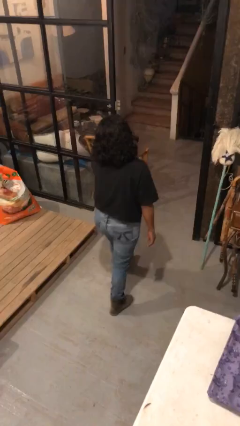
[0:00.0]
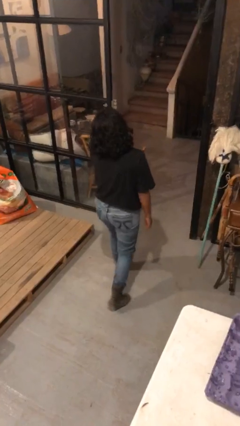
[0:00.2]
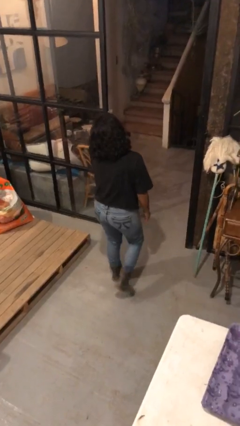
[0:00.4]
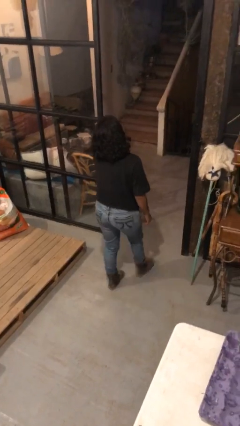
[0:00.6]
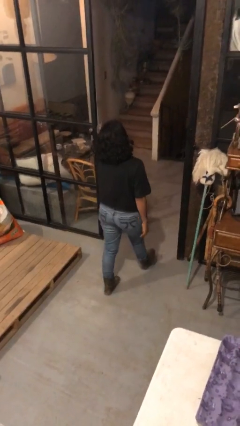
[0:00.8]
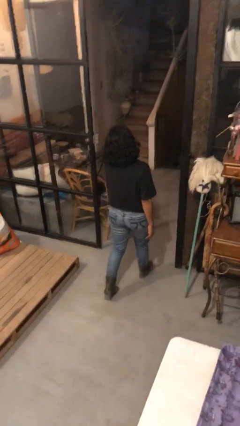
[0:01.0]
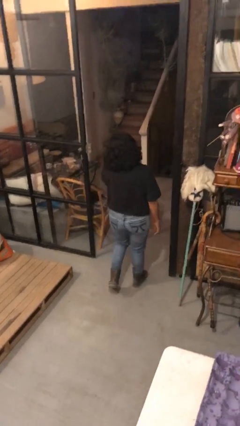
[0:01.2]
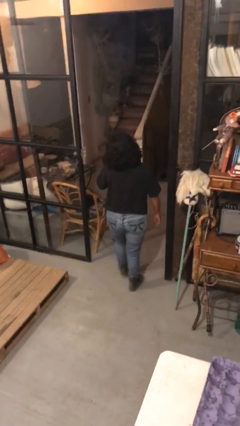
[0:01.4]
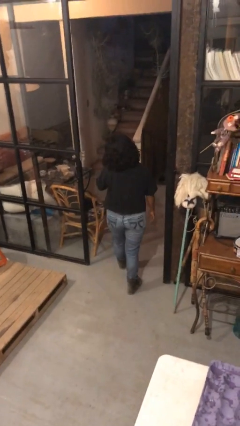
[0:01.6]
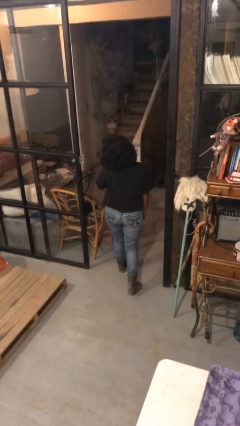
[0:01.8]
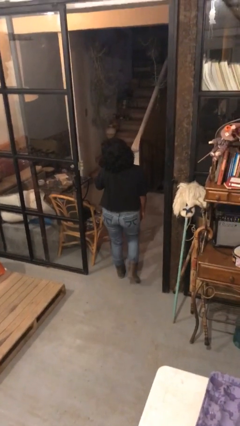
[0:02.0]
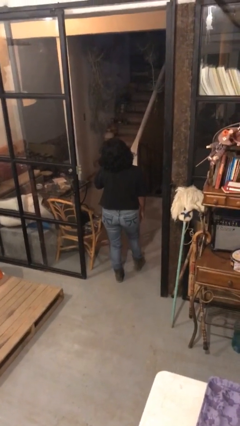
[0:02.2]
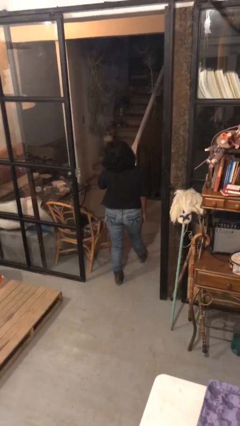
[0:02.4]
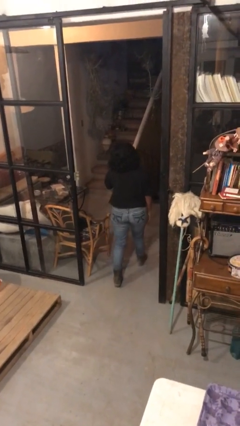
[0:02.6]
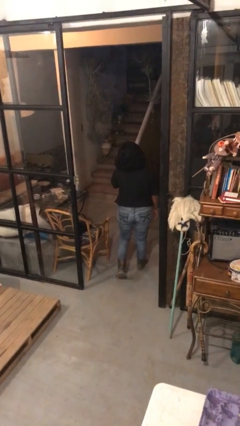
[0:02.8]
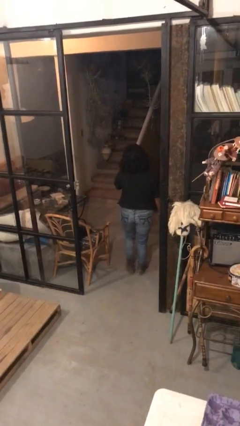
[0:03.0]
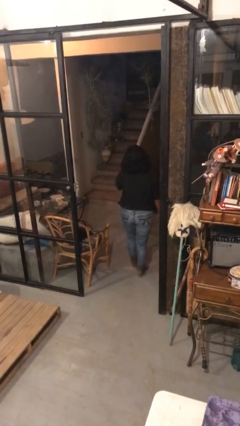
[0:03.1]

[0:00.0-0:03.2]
person exits scene through structure

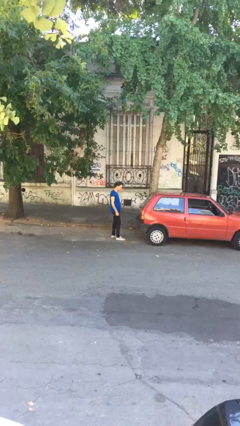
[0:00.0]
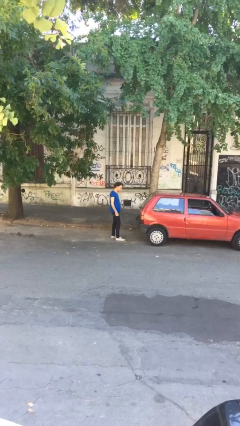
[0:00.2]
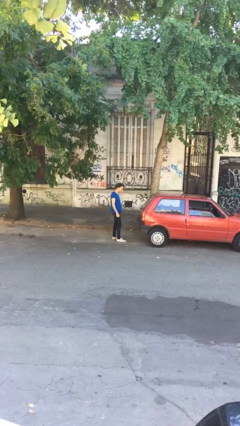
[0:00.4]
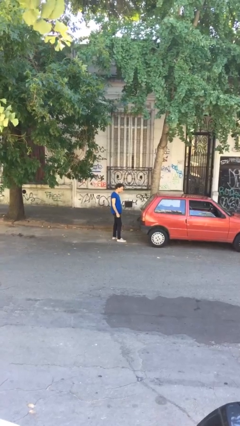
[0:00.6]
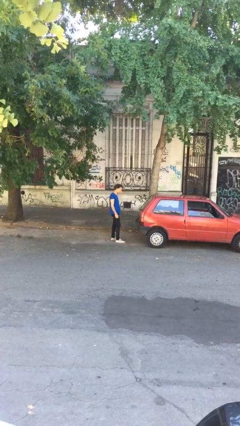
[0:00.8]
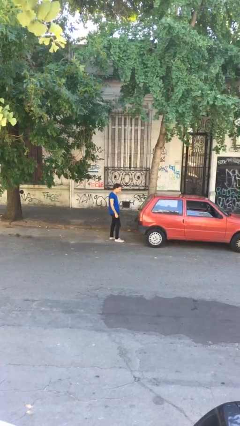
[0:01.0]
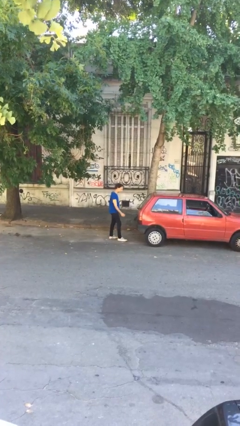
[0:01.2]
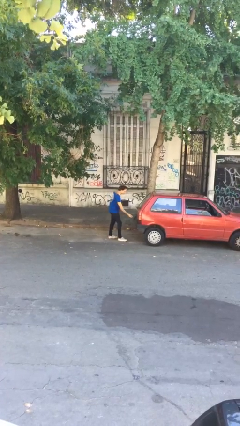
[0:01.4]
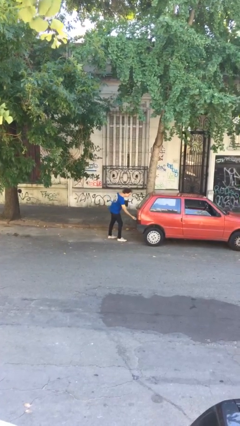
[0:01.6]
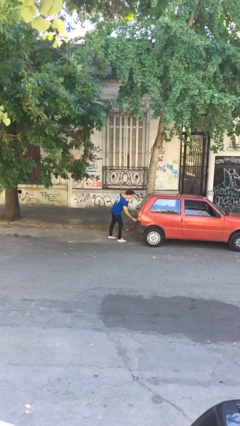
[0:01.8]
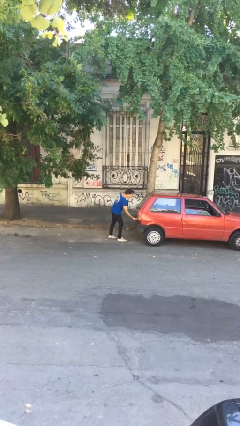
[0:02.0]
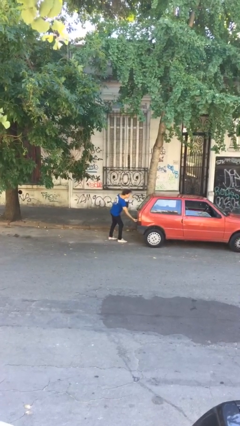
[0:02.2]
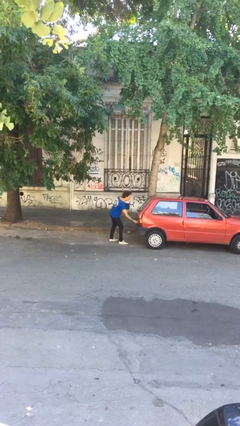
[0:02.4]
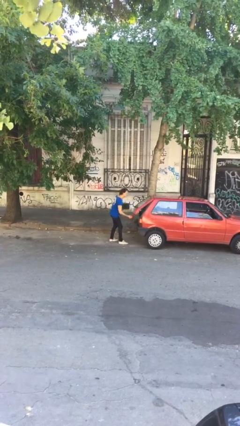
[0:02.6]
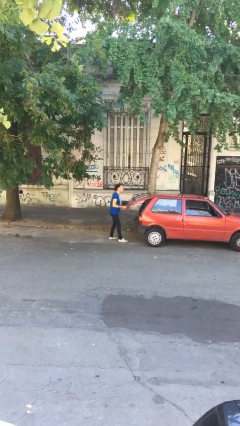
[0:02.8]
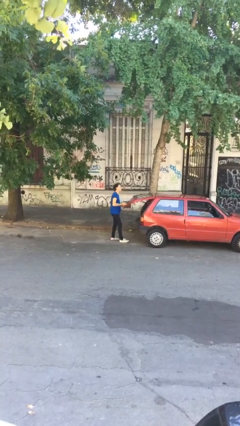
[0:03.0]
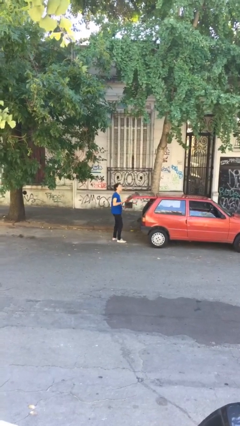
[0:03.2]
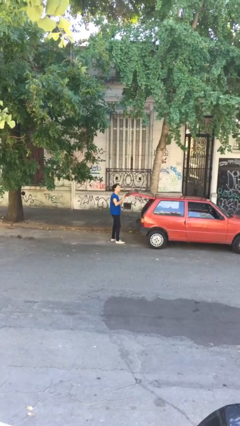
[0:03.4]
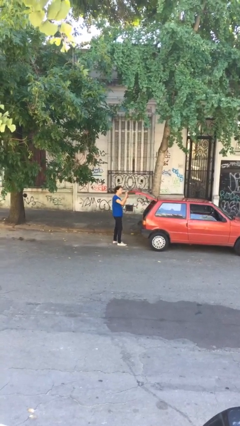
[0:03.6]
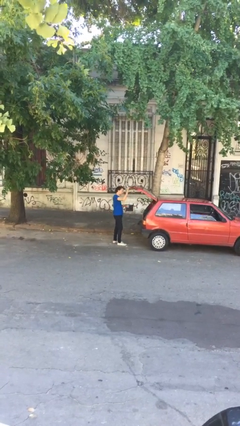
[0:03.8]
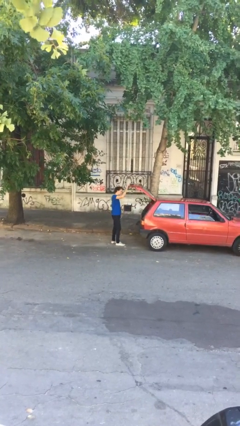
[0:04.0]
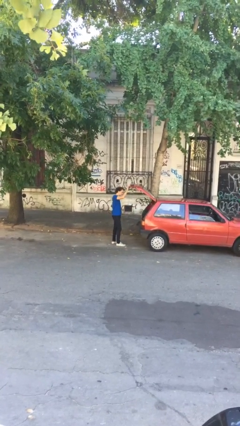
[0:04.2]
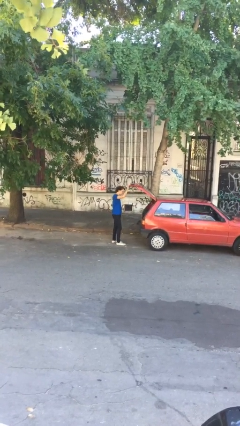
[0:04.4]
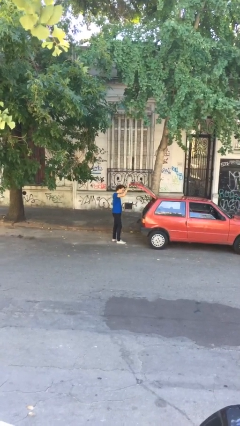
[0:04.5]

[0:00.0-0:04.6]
person opens car trunk

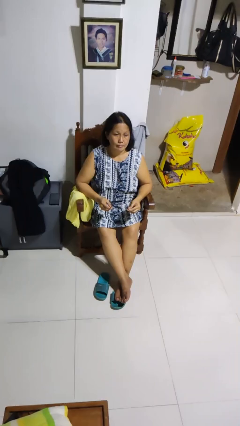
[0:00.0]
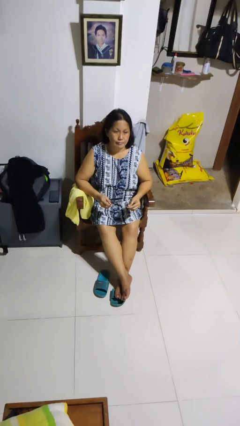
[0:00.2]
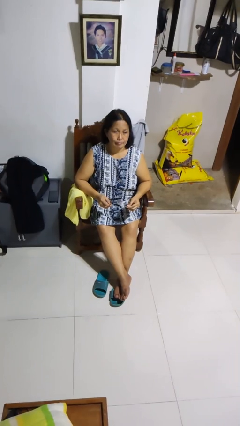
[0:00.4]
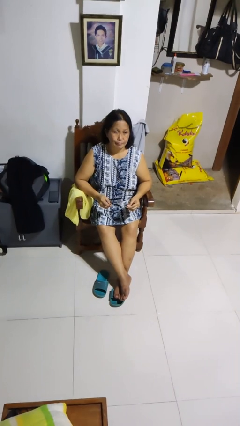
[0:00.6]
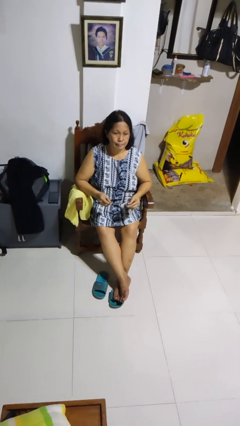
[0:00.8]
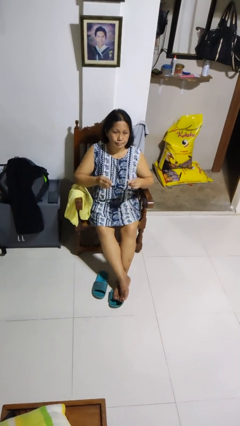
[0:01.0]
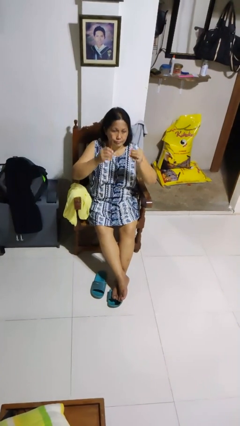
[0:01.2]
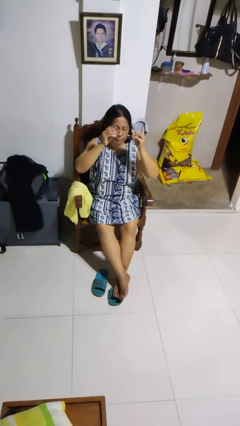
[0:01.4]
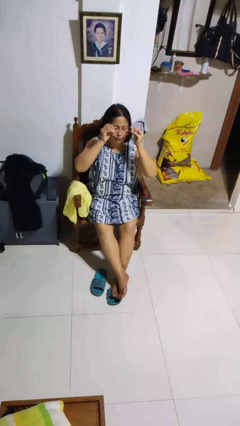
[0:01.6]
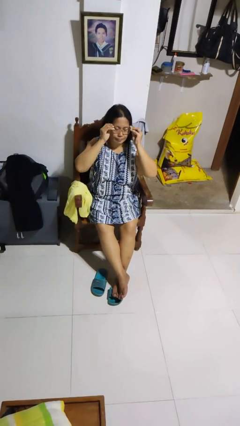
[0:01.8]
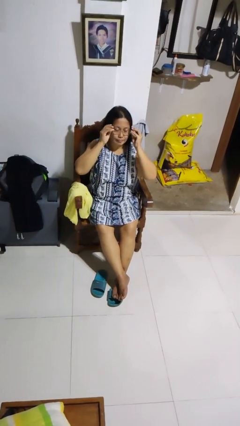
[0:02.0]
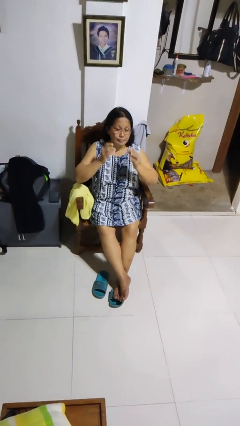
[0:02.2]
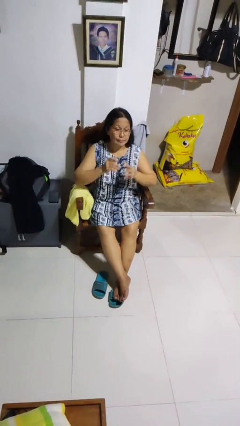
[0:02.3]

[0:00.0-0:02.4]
person puts on glasses

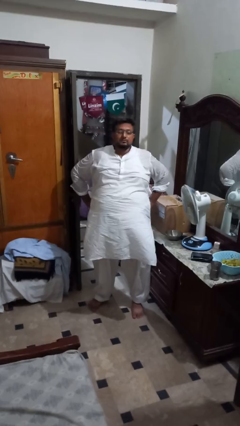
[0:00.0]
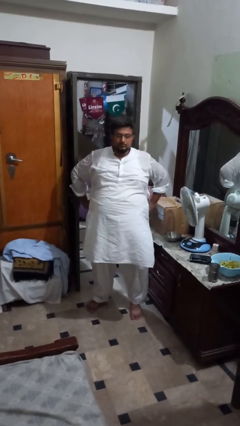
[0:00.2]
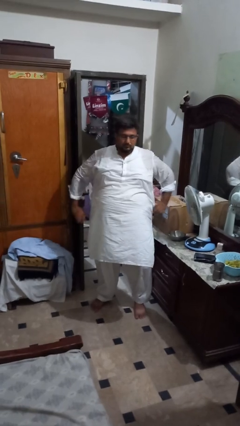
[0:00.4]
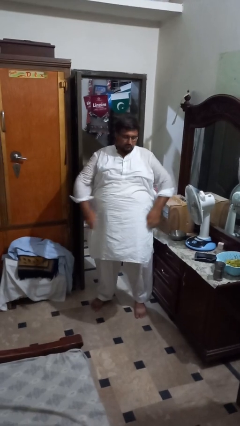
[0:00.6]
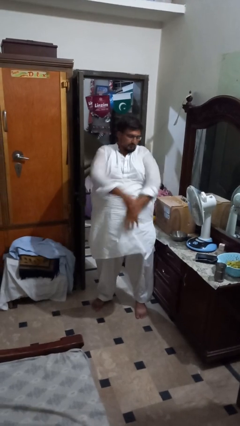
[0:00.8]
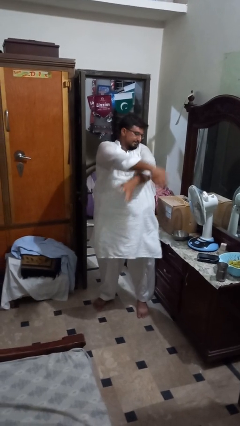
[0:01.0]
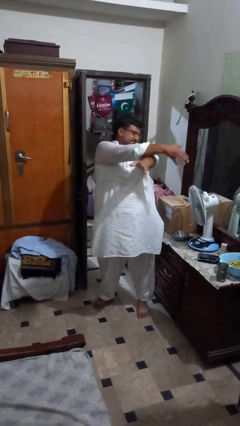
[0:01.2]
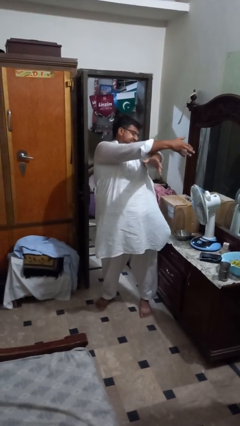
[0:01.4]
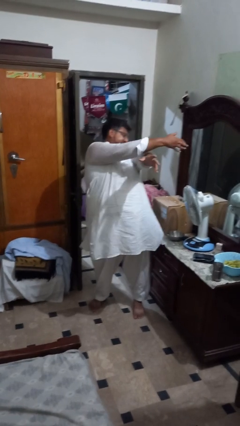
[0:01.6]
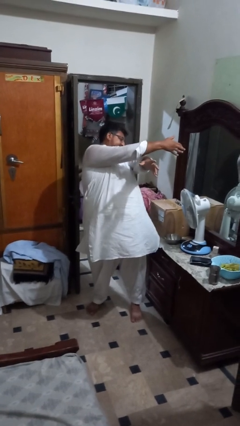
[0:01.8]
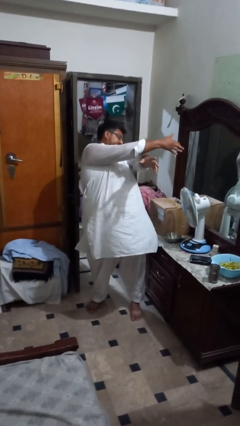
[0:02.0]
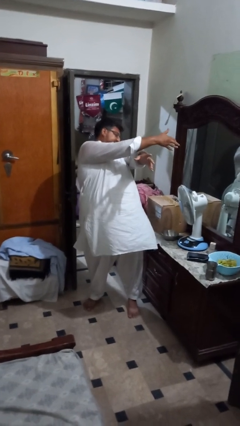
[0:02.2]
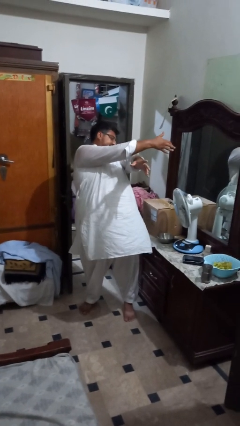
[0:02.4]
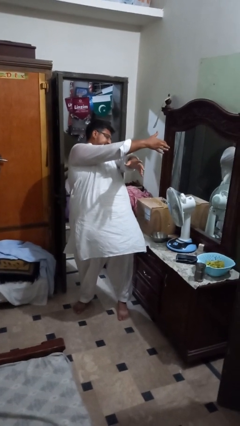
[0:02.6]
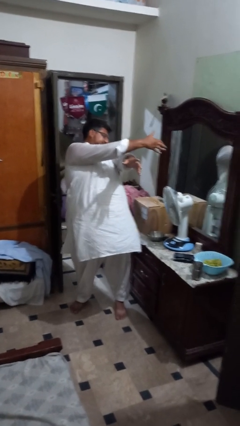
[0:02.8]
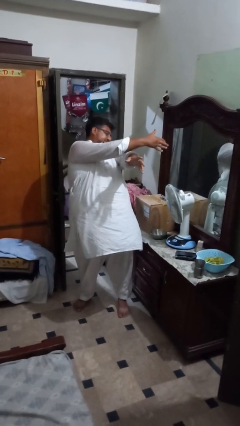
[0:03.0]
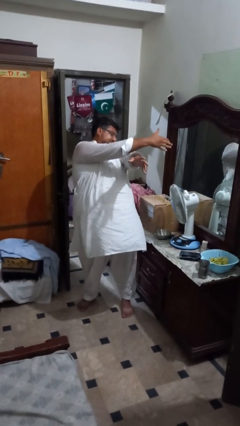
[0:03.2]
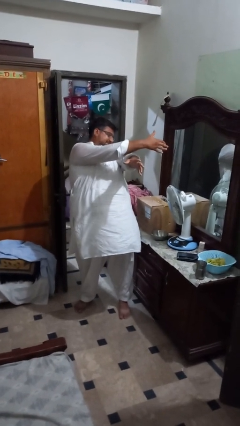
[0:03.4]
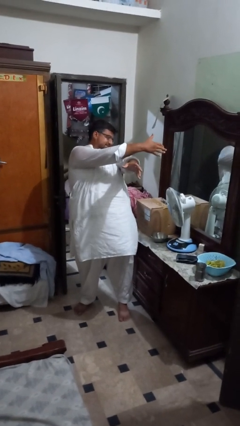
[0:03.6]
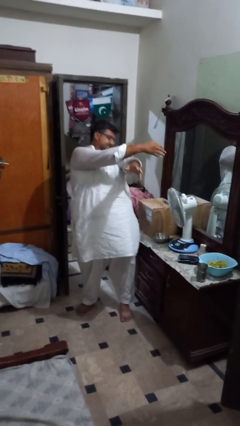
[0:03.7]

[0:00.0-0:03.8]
person stretches arms to side

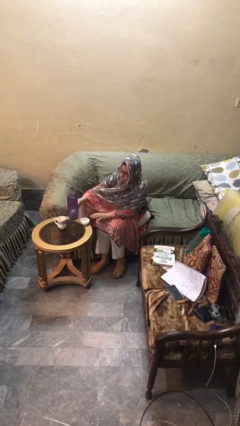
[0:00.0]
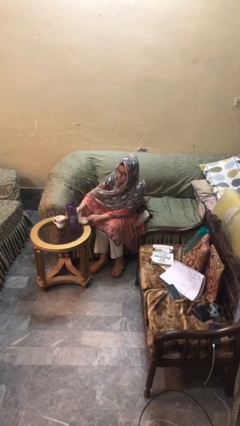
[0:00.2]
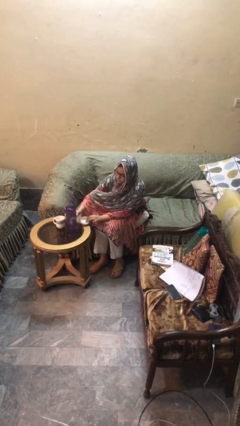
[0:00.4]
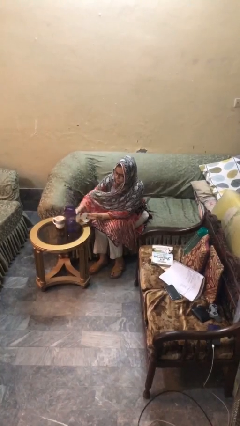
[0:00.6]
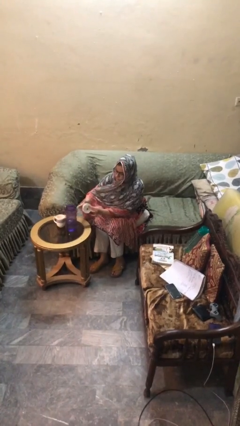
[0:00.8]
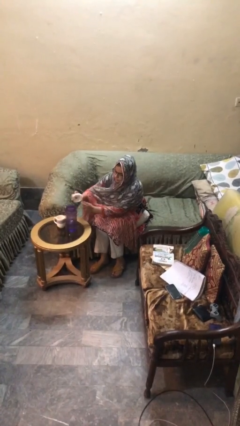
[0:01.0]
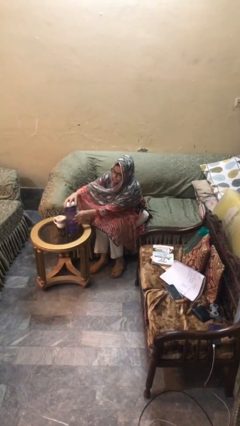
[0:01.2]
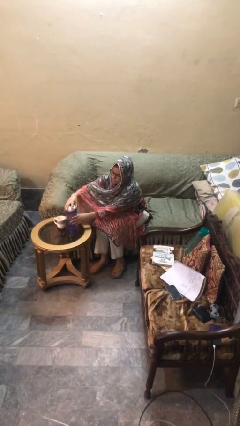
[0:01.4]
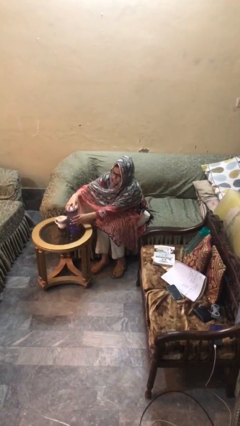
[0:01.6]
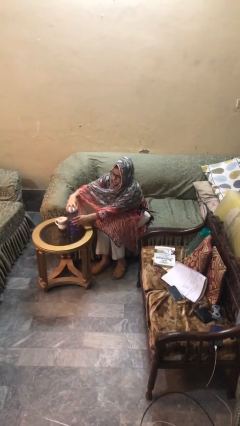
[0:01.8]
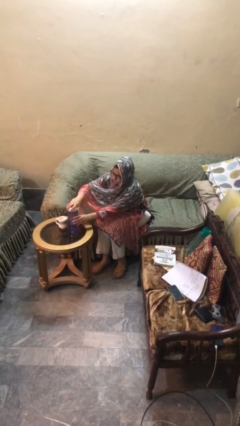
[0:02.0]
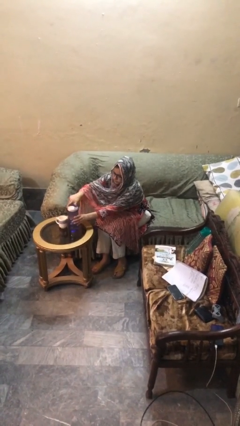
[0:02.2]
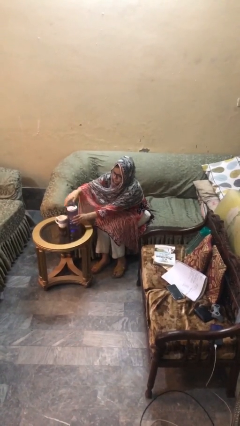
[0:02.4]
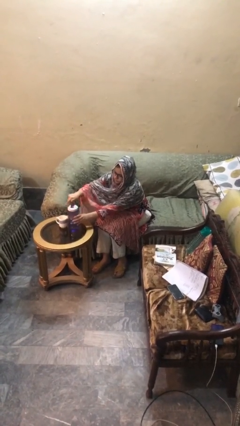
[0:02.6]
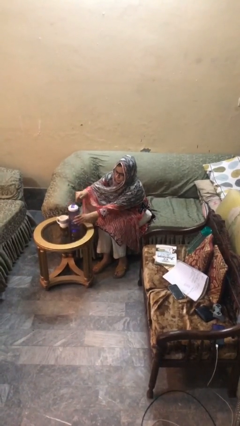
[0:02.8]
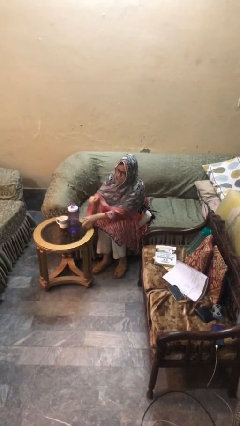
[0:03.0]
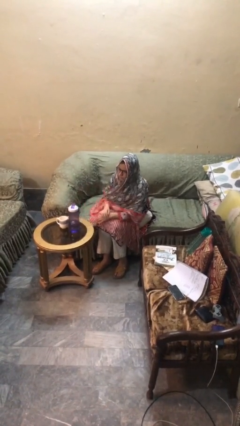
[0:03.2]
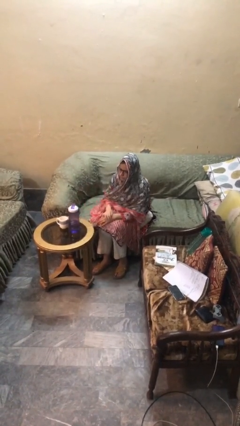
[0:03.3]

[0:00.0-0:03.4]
person screws lid to bottle

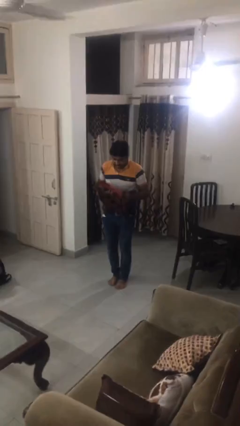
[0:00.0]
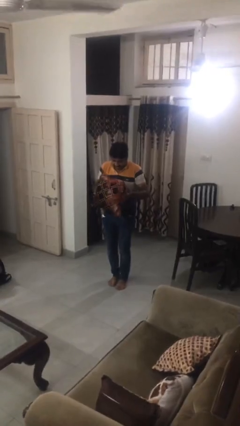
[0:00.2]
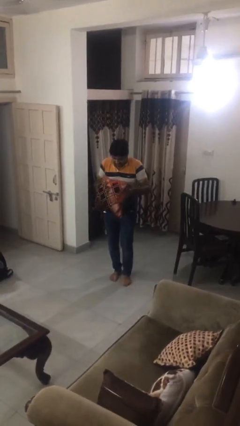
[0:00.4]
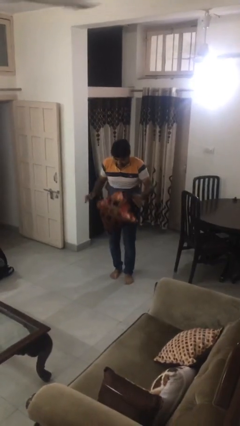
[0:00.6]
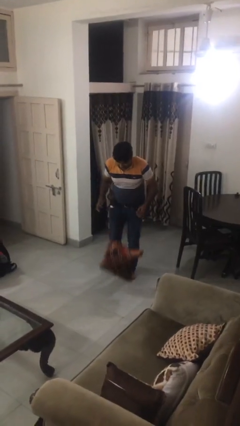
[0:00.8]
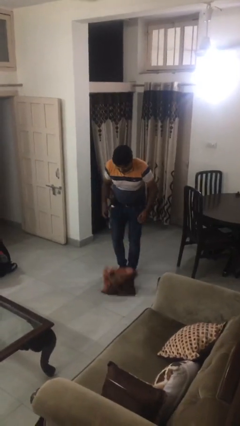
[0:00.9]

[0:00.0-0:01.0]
person drops object
